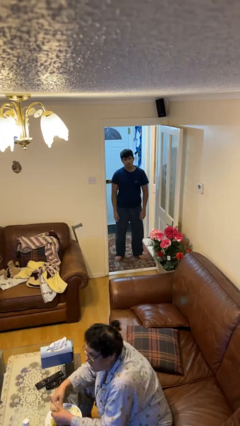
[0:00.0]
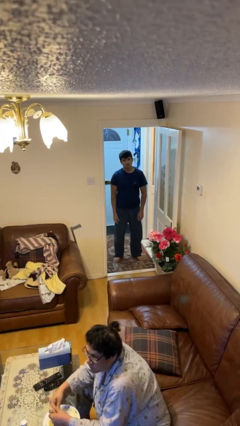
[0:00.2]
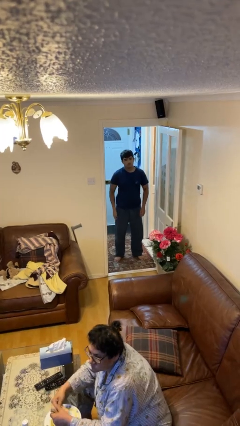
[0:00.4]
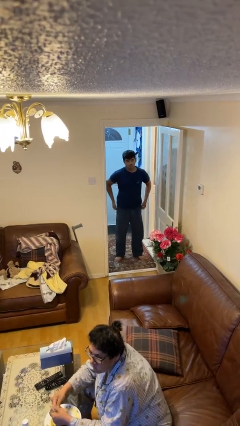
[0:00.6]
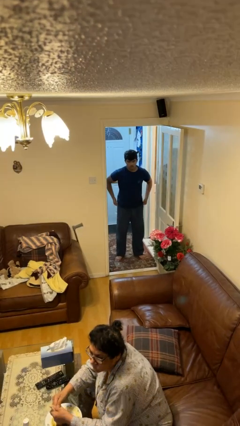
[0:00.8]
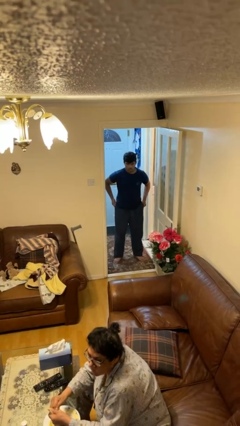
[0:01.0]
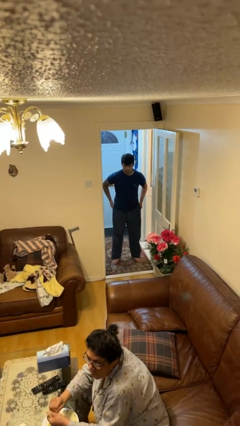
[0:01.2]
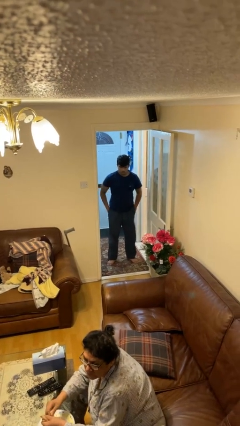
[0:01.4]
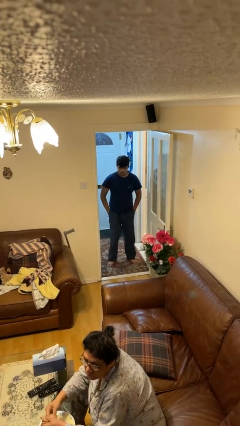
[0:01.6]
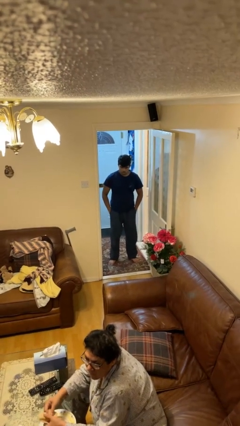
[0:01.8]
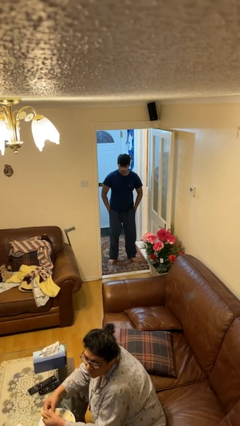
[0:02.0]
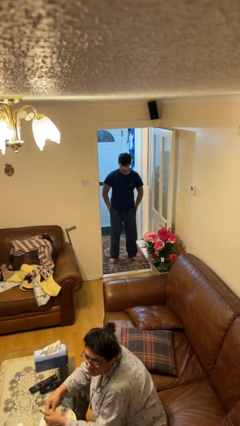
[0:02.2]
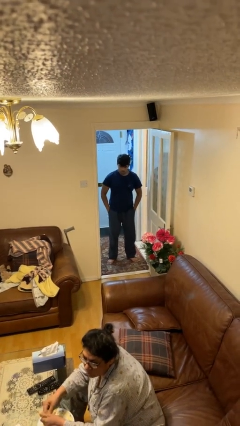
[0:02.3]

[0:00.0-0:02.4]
person puts hands in back pockets

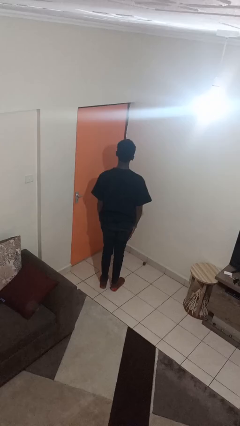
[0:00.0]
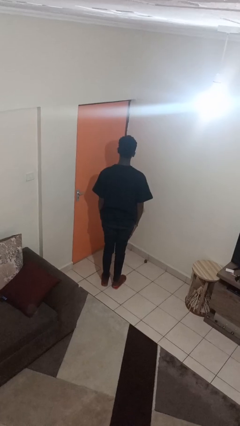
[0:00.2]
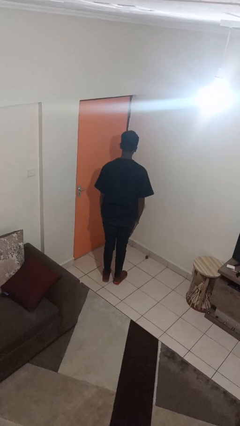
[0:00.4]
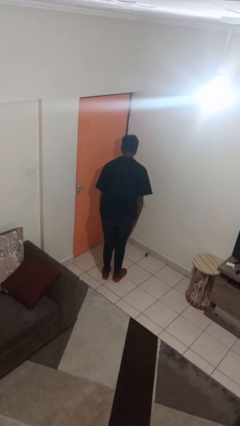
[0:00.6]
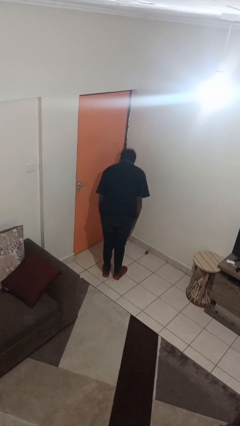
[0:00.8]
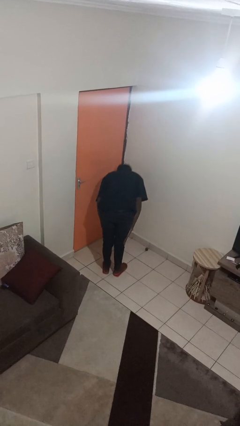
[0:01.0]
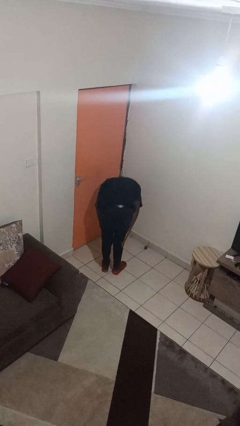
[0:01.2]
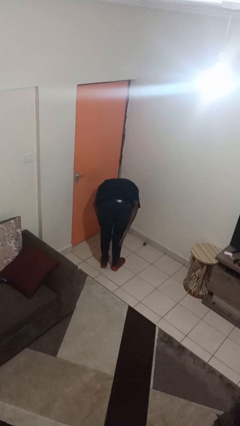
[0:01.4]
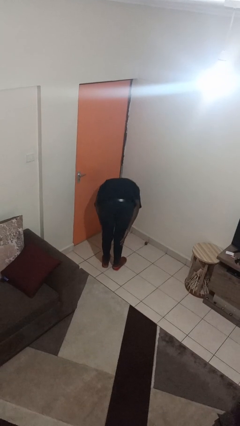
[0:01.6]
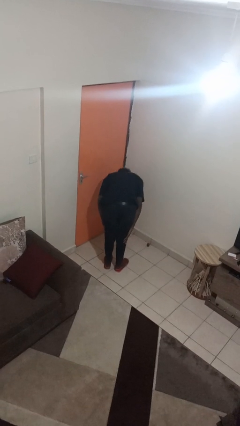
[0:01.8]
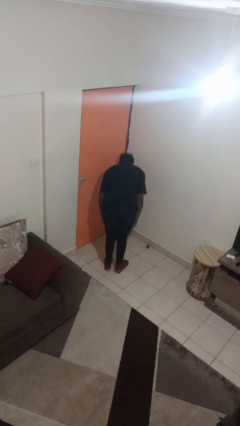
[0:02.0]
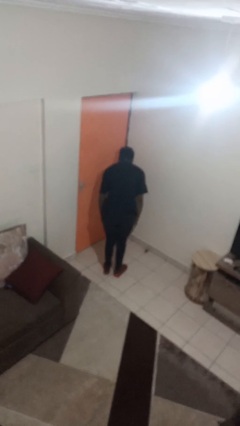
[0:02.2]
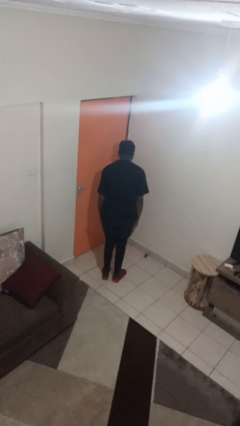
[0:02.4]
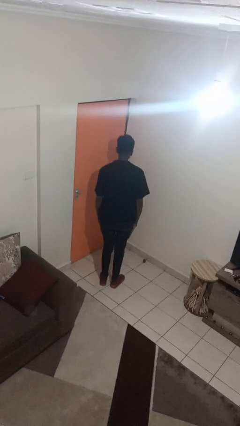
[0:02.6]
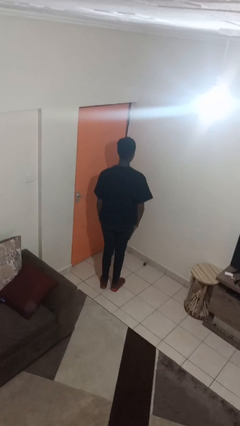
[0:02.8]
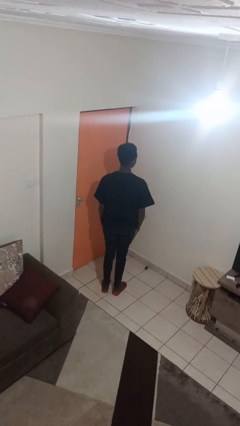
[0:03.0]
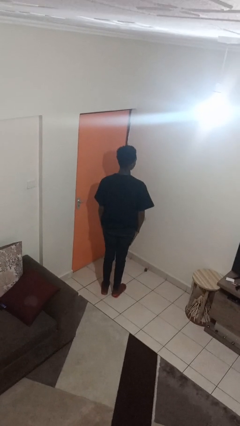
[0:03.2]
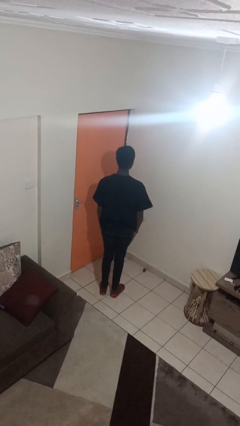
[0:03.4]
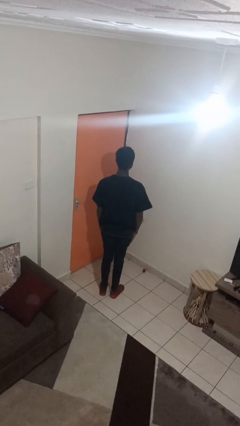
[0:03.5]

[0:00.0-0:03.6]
person bows

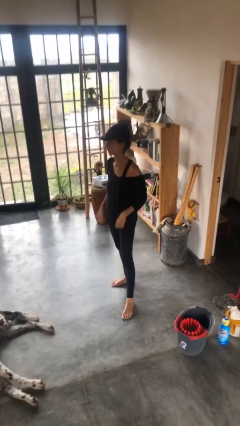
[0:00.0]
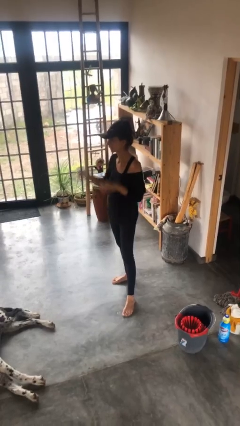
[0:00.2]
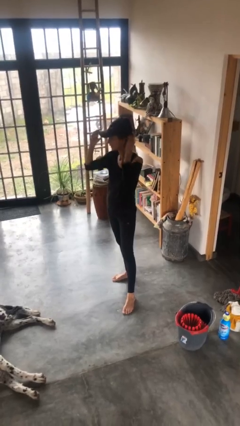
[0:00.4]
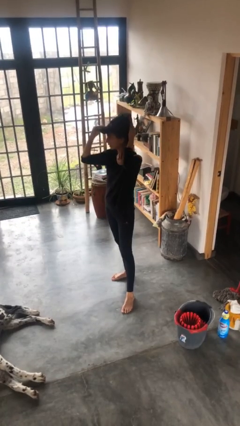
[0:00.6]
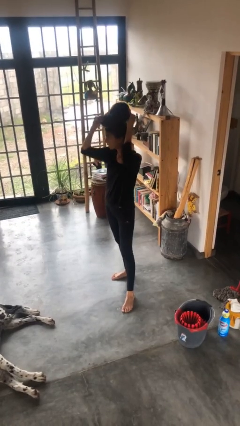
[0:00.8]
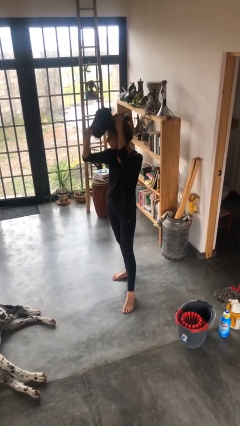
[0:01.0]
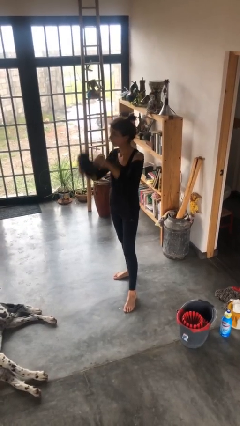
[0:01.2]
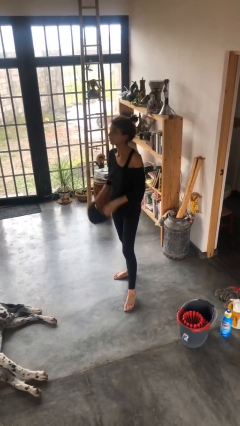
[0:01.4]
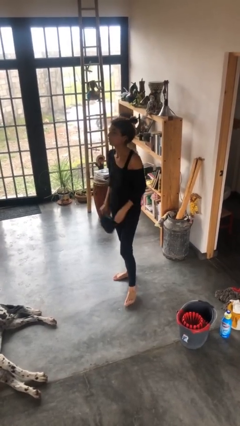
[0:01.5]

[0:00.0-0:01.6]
person takes off hat

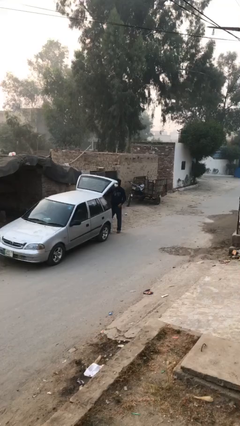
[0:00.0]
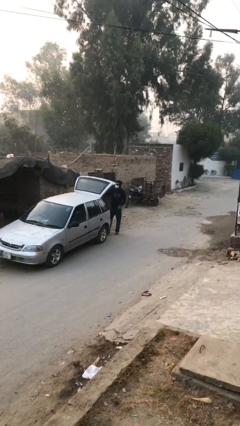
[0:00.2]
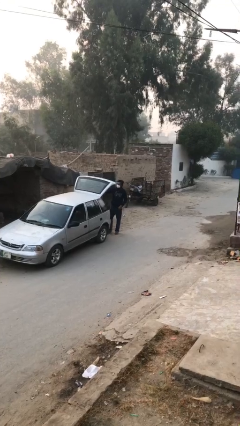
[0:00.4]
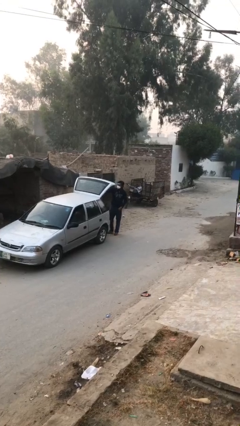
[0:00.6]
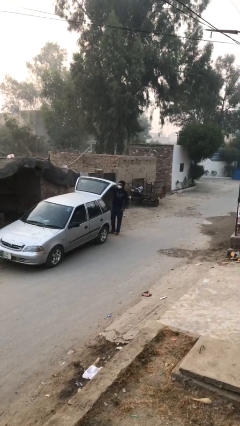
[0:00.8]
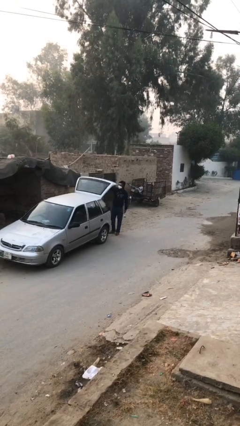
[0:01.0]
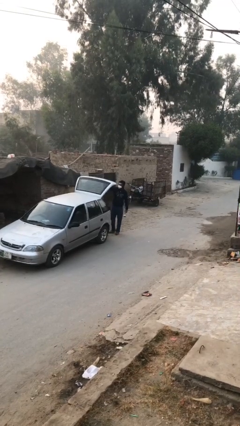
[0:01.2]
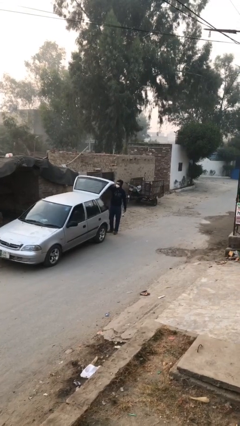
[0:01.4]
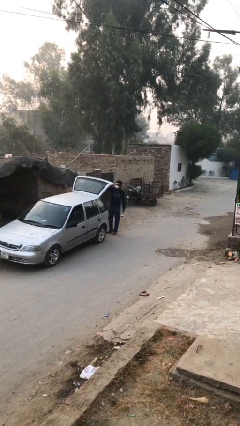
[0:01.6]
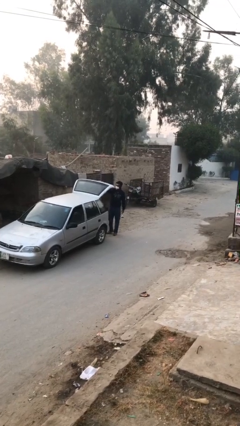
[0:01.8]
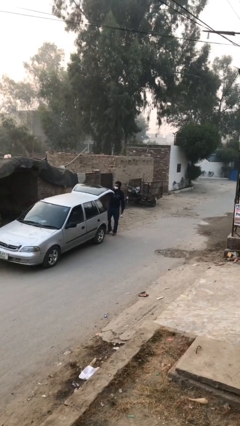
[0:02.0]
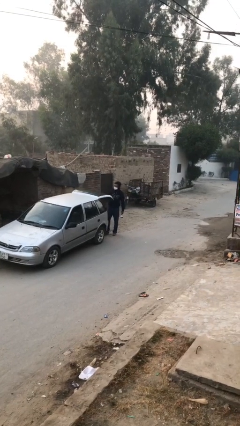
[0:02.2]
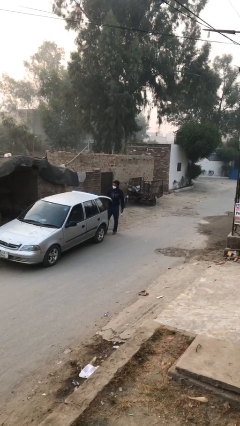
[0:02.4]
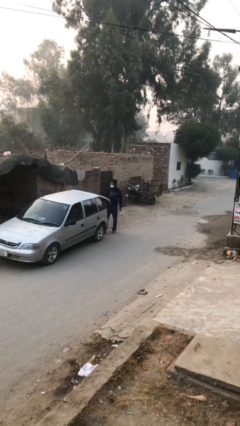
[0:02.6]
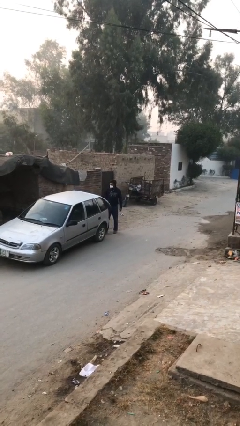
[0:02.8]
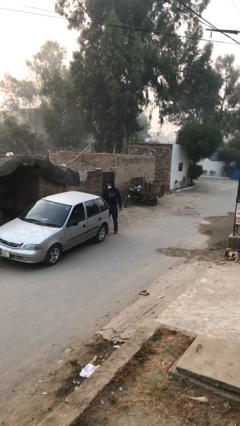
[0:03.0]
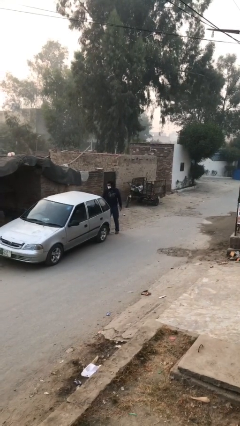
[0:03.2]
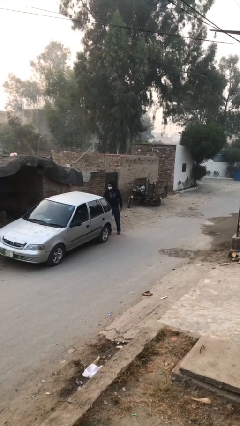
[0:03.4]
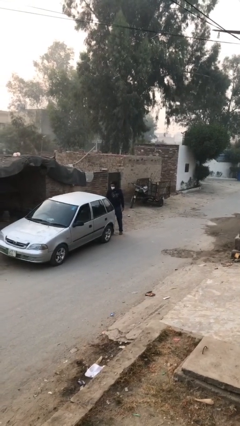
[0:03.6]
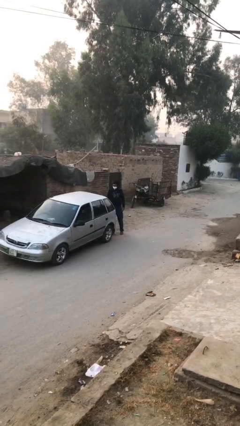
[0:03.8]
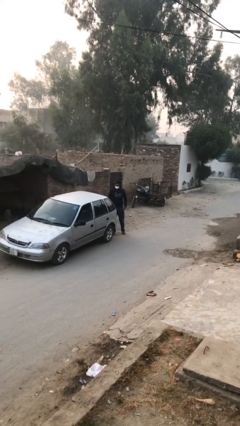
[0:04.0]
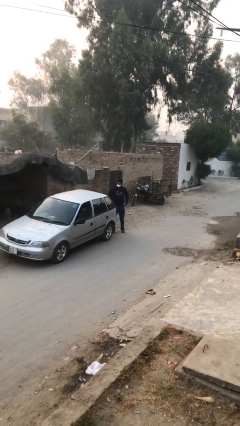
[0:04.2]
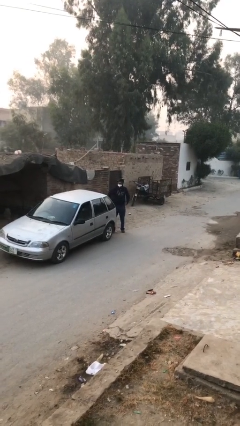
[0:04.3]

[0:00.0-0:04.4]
person closes car trunk

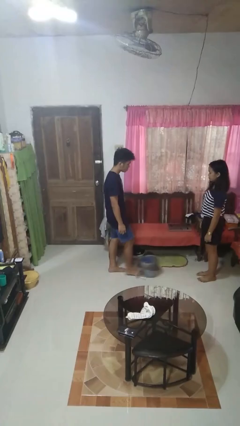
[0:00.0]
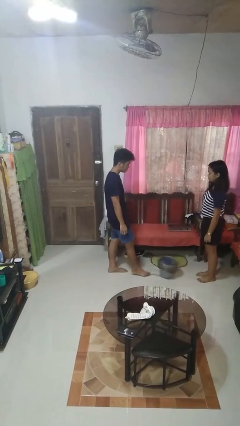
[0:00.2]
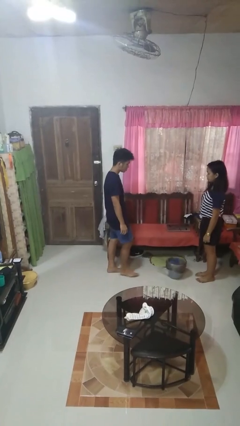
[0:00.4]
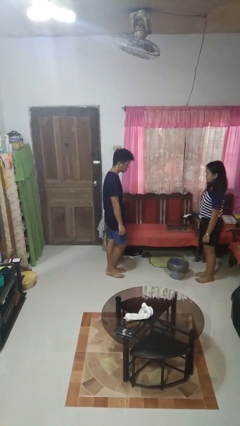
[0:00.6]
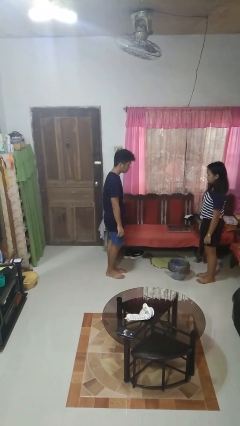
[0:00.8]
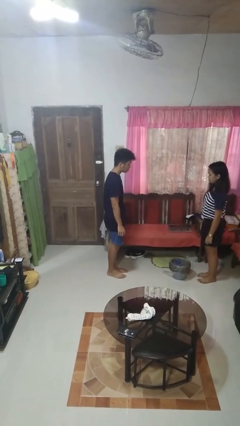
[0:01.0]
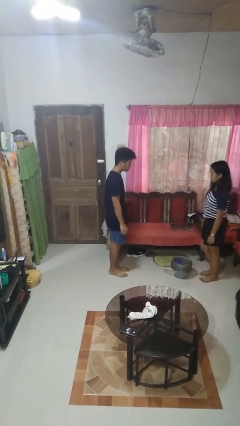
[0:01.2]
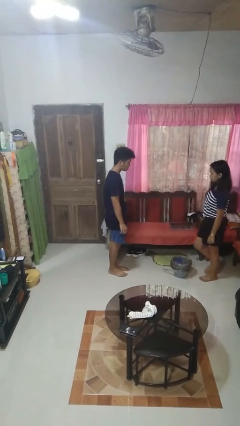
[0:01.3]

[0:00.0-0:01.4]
person kicks object to person

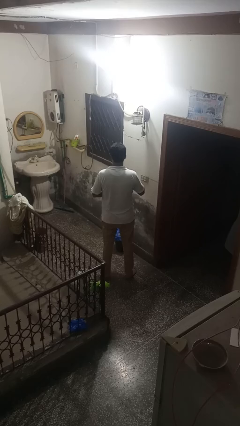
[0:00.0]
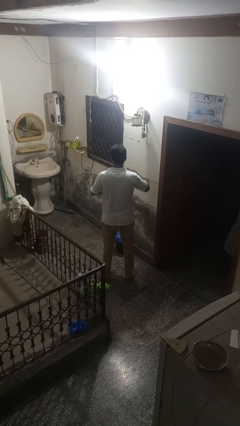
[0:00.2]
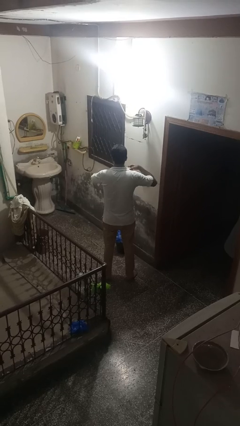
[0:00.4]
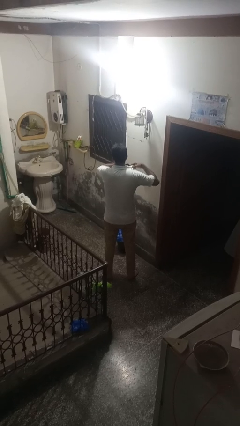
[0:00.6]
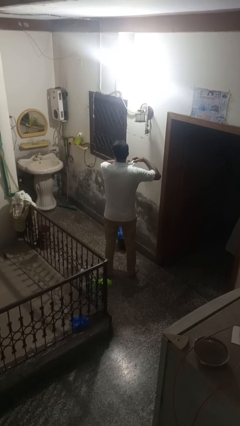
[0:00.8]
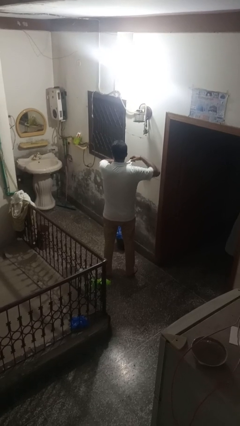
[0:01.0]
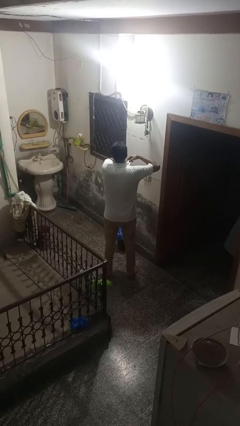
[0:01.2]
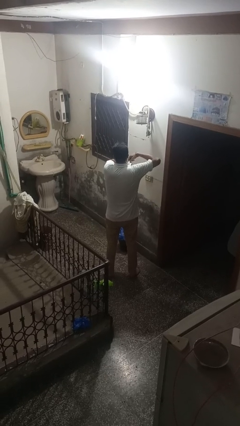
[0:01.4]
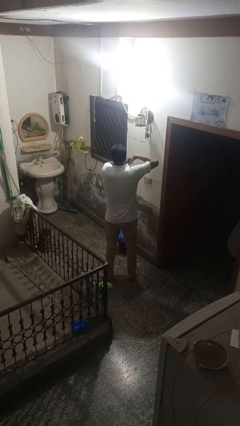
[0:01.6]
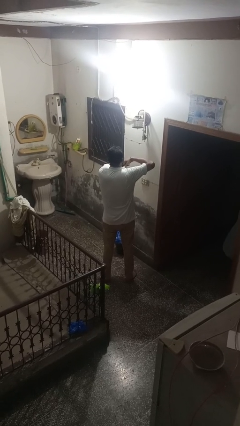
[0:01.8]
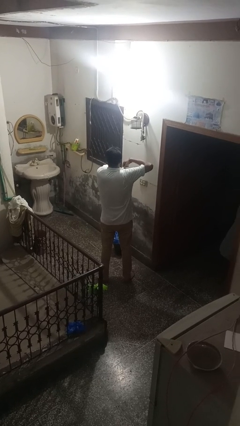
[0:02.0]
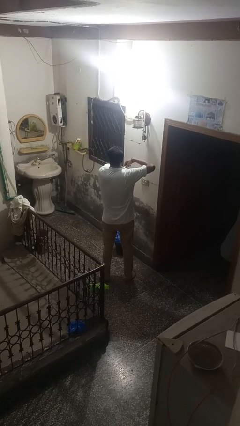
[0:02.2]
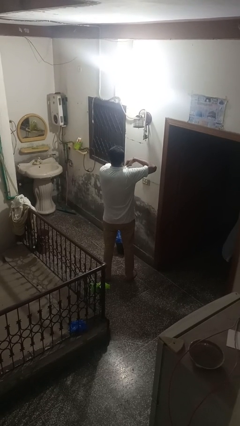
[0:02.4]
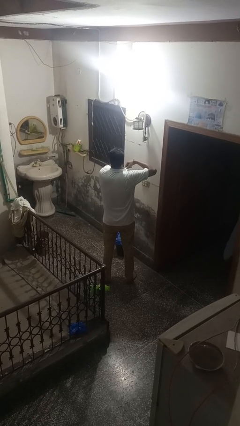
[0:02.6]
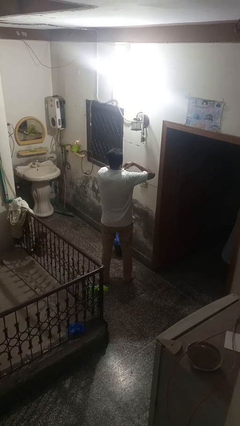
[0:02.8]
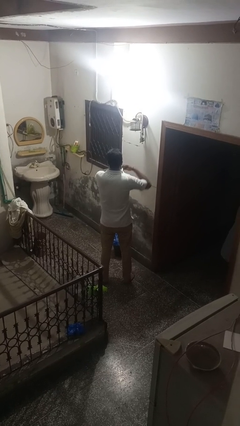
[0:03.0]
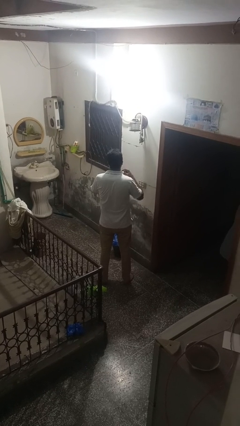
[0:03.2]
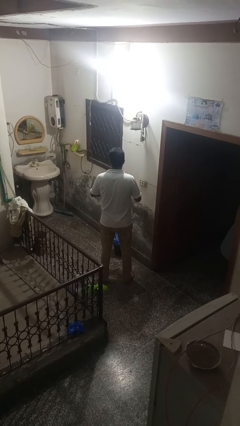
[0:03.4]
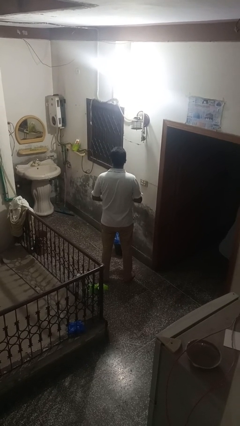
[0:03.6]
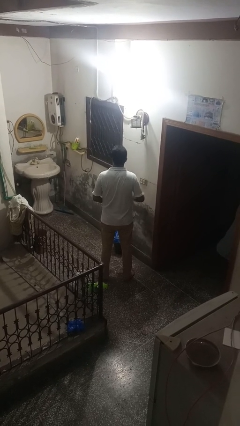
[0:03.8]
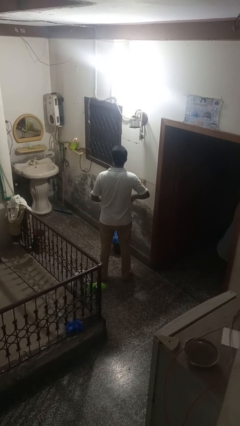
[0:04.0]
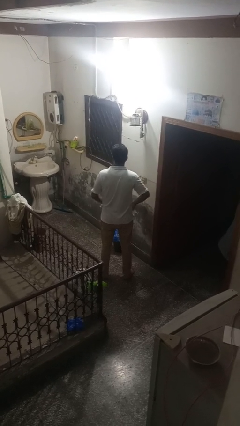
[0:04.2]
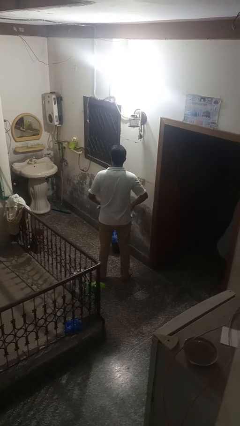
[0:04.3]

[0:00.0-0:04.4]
person applies deodorant

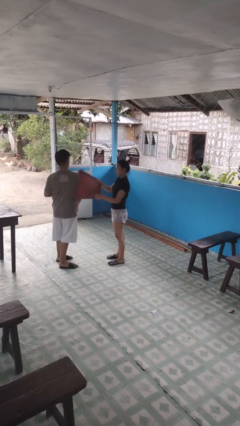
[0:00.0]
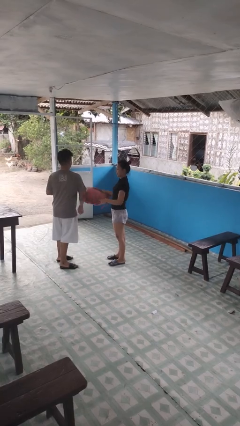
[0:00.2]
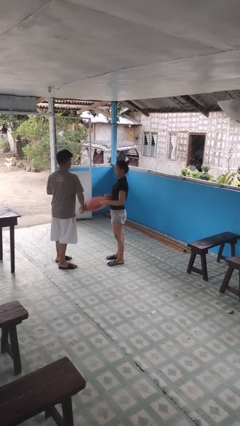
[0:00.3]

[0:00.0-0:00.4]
person hits person with pillow
